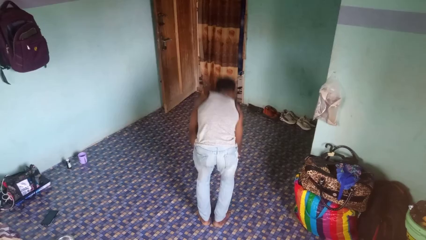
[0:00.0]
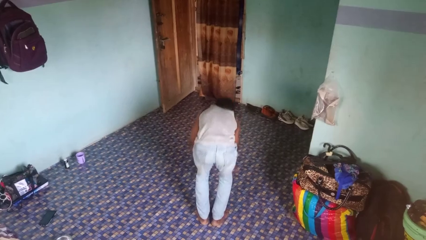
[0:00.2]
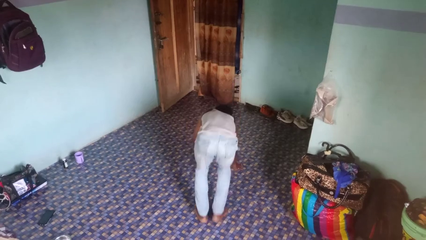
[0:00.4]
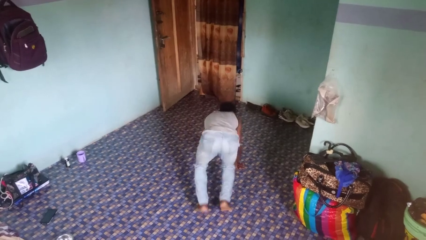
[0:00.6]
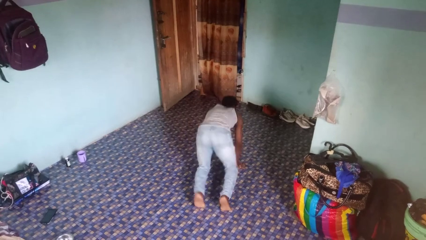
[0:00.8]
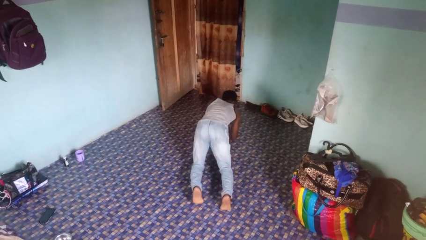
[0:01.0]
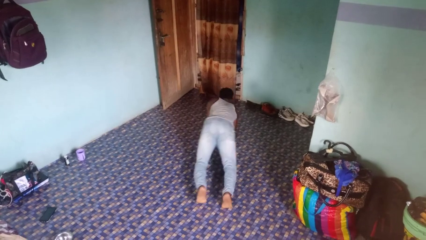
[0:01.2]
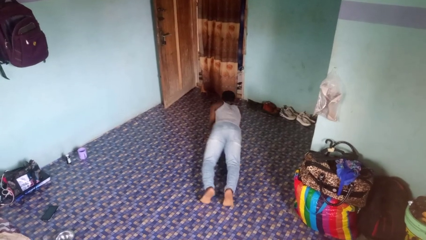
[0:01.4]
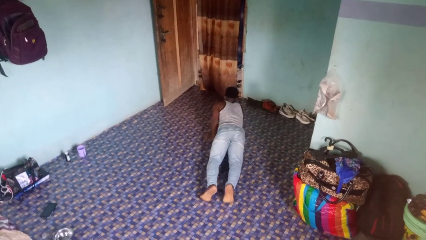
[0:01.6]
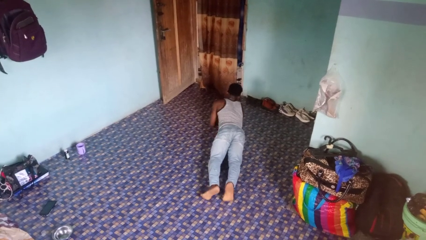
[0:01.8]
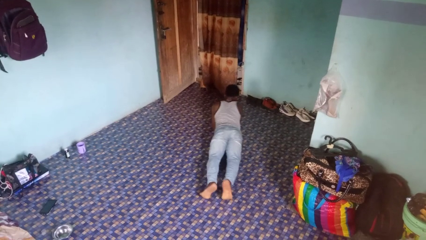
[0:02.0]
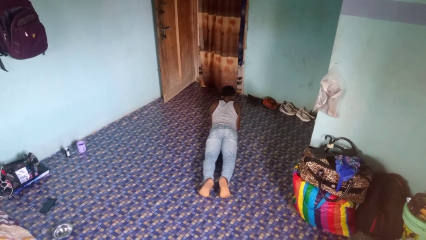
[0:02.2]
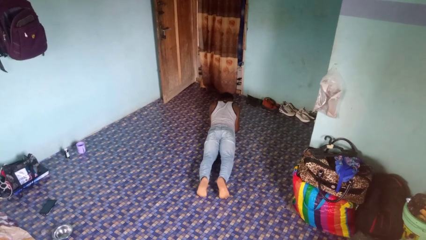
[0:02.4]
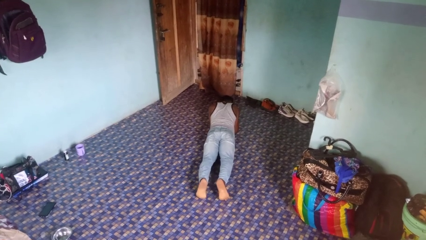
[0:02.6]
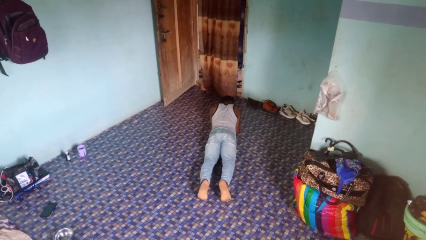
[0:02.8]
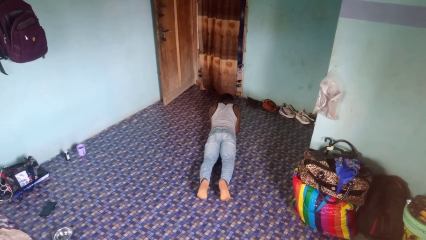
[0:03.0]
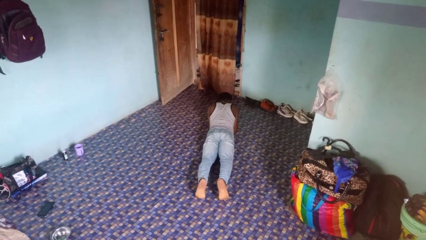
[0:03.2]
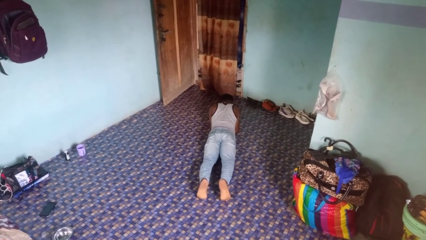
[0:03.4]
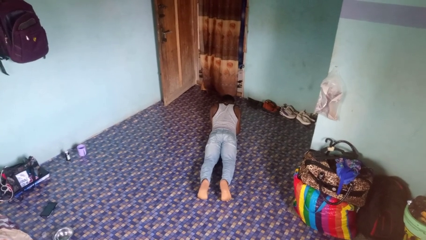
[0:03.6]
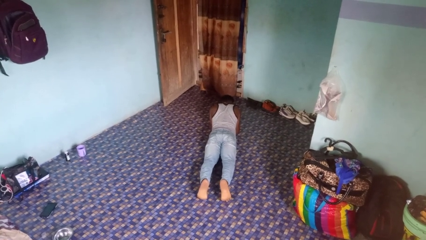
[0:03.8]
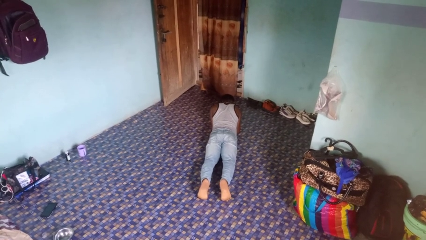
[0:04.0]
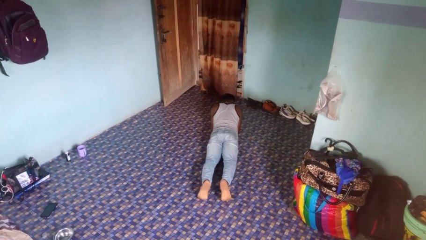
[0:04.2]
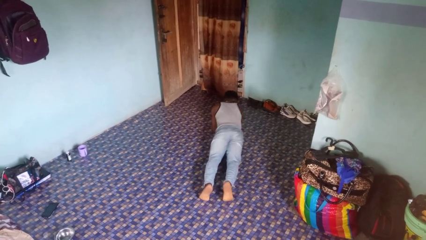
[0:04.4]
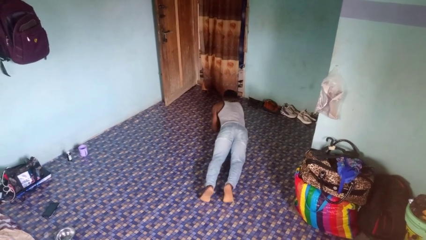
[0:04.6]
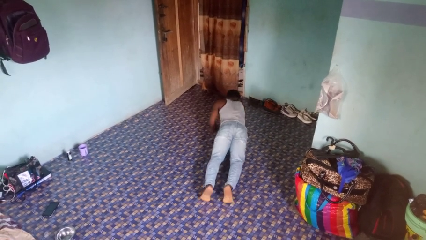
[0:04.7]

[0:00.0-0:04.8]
person exercises with plank

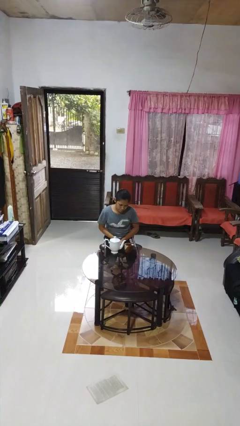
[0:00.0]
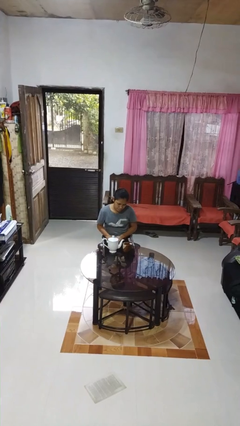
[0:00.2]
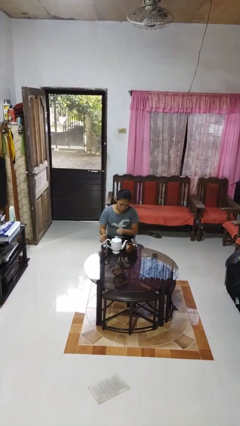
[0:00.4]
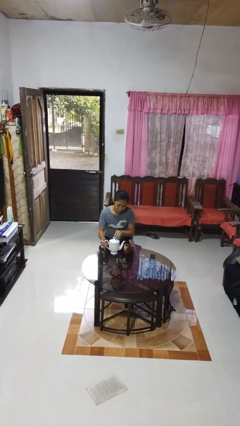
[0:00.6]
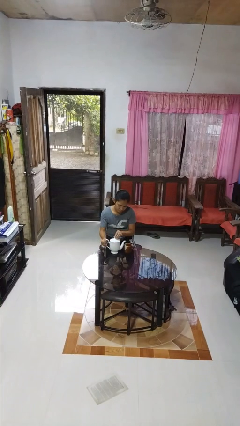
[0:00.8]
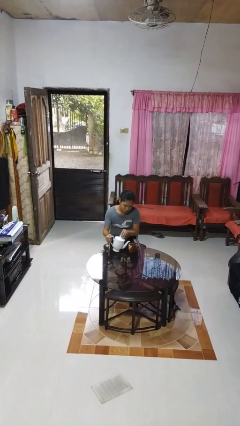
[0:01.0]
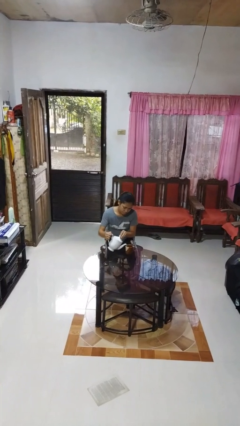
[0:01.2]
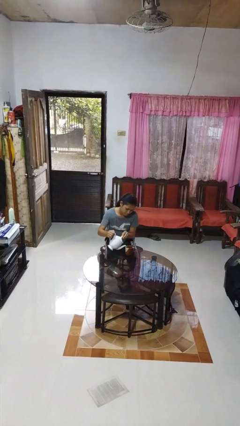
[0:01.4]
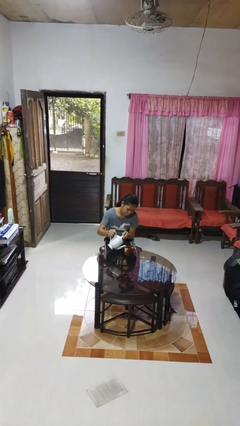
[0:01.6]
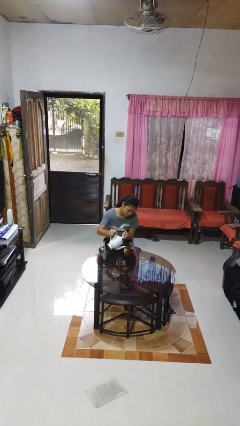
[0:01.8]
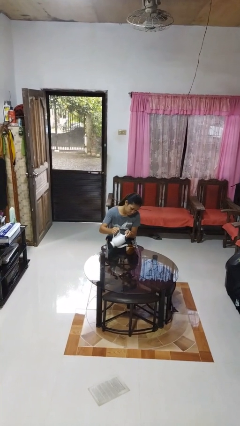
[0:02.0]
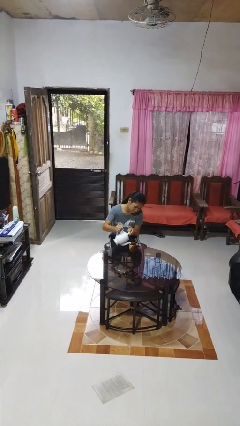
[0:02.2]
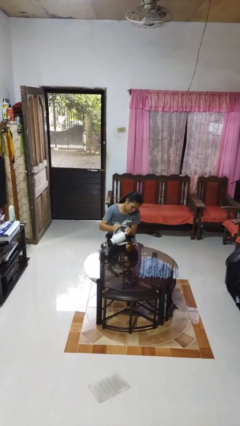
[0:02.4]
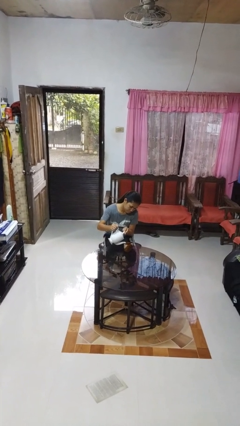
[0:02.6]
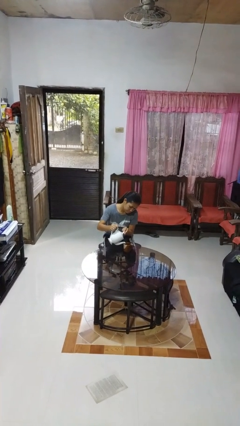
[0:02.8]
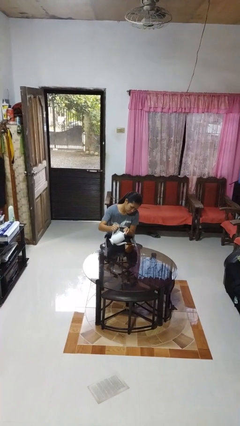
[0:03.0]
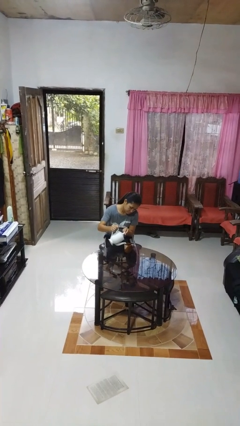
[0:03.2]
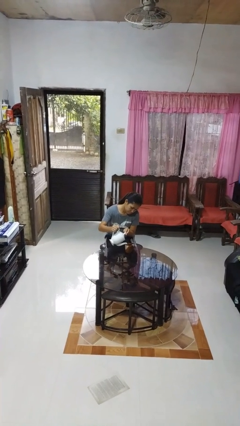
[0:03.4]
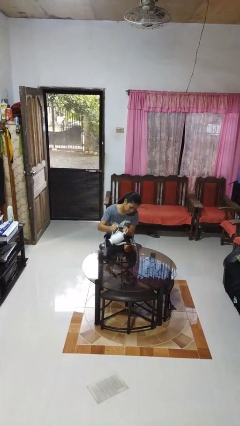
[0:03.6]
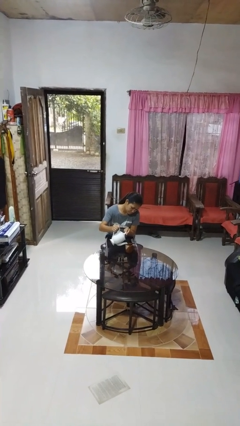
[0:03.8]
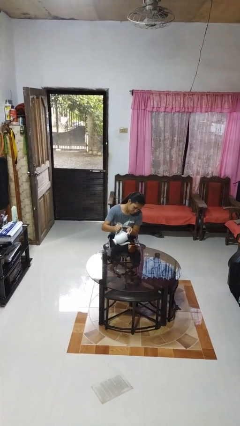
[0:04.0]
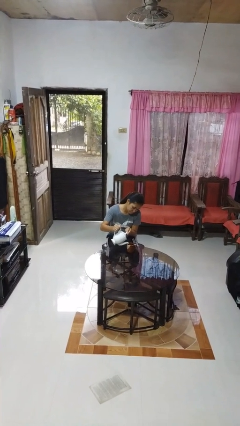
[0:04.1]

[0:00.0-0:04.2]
person pours coffee into mug

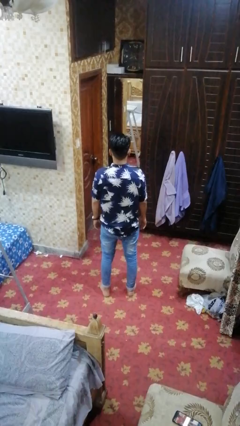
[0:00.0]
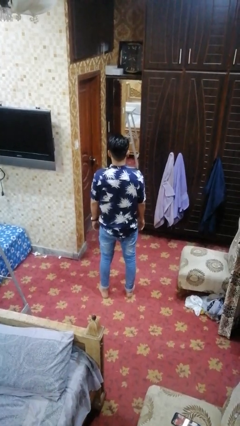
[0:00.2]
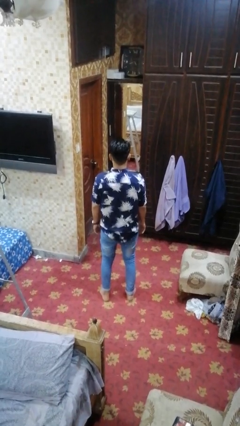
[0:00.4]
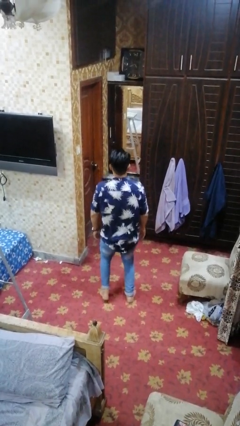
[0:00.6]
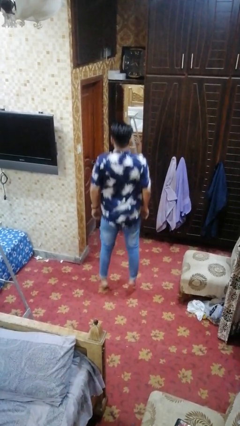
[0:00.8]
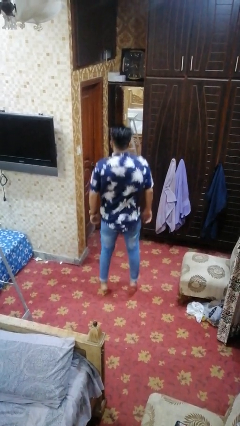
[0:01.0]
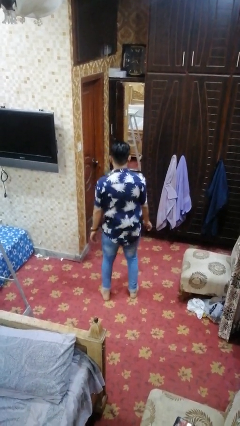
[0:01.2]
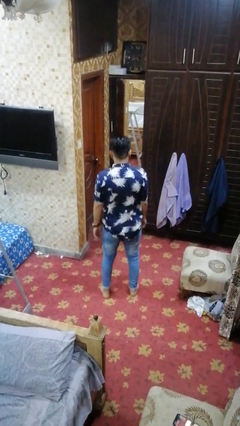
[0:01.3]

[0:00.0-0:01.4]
person jumps

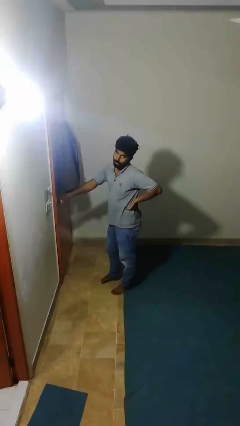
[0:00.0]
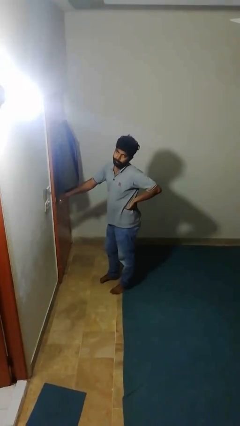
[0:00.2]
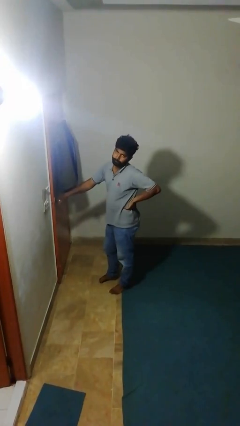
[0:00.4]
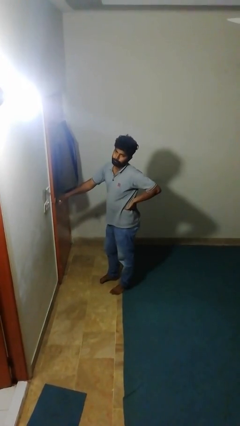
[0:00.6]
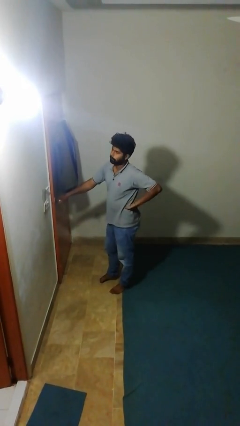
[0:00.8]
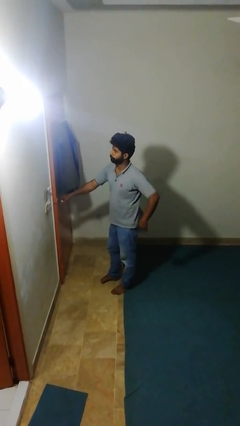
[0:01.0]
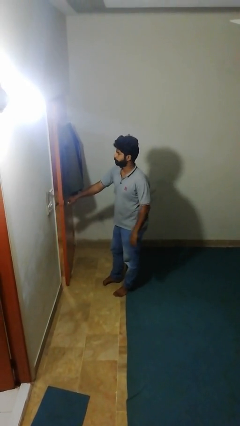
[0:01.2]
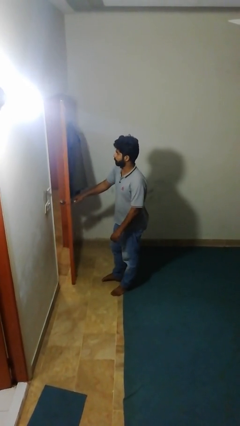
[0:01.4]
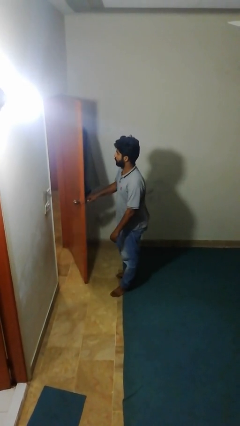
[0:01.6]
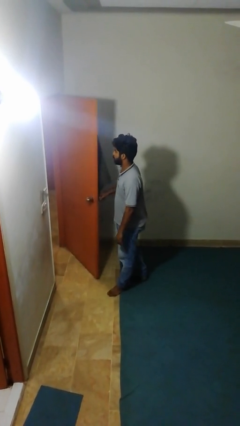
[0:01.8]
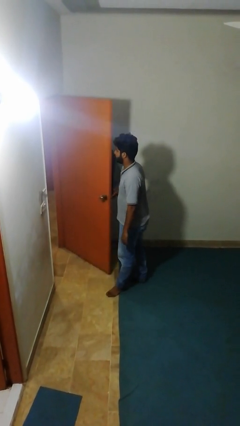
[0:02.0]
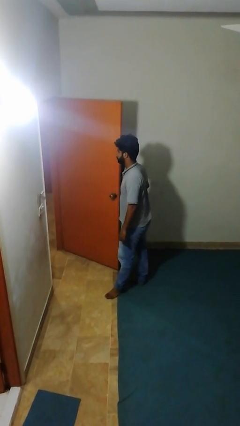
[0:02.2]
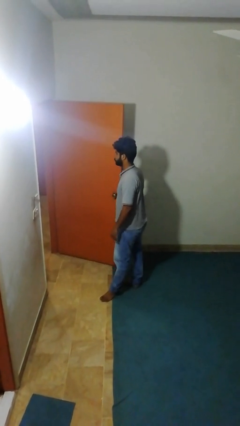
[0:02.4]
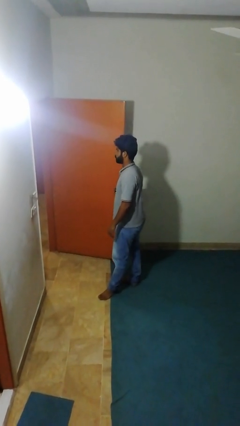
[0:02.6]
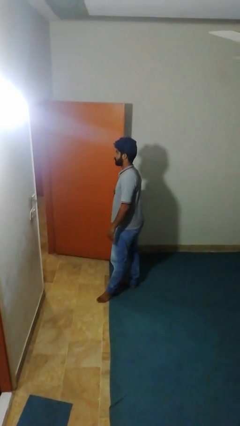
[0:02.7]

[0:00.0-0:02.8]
person opens facility door

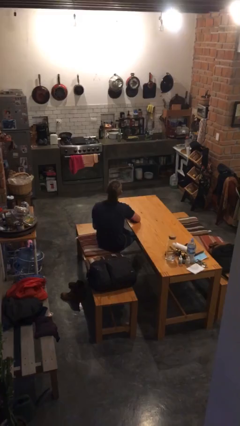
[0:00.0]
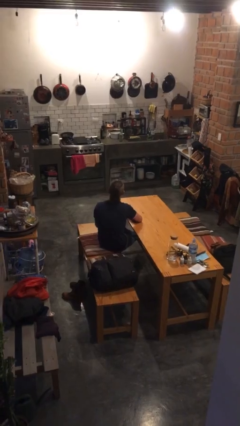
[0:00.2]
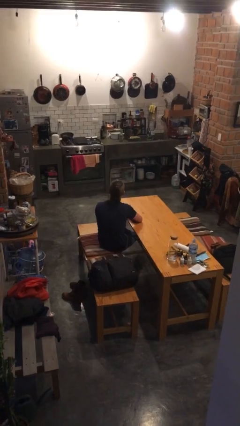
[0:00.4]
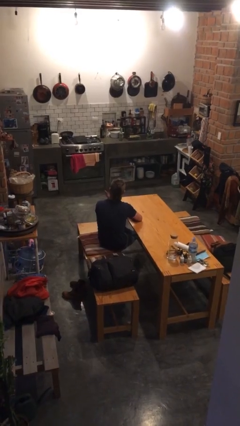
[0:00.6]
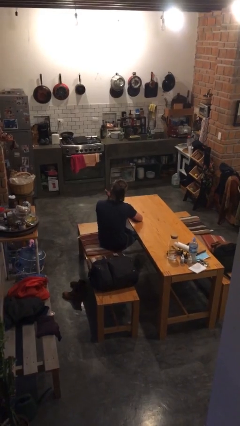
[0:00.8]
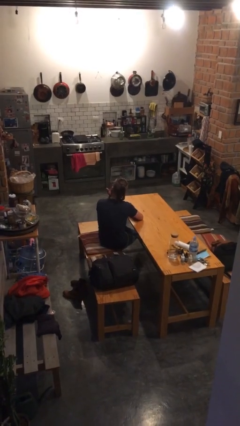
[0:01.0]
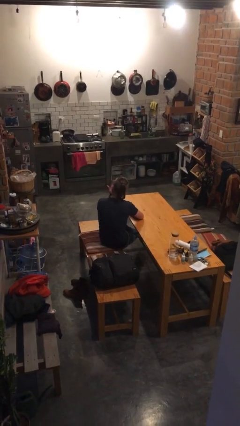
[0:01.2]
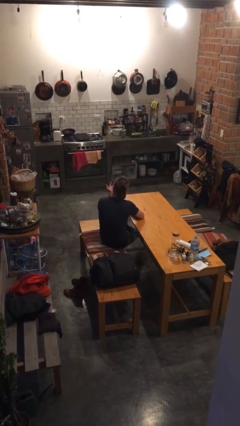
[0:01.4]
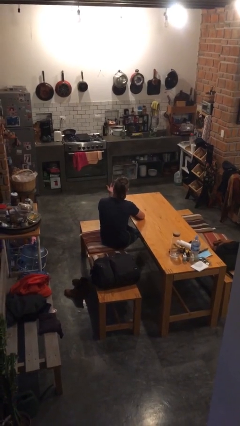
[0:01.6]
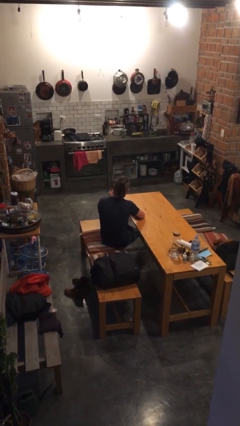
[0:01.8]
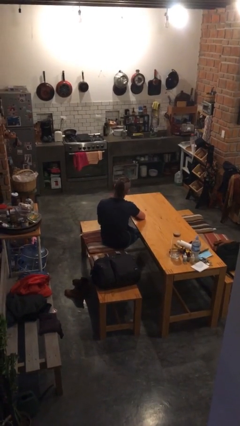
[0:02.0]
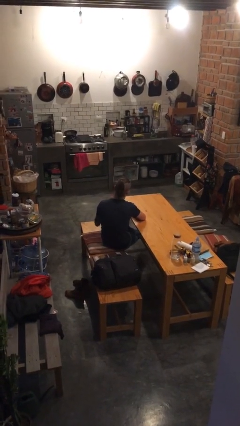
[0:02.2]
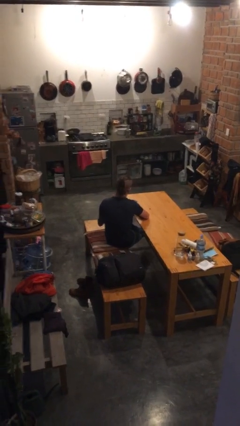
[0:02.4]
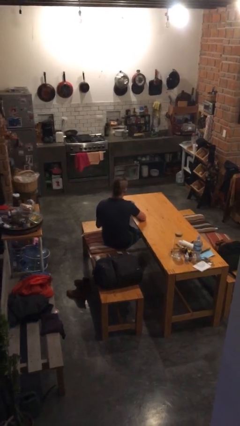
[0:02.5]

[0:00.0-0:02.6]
person licks fingers

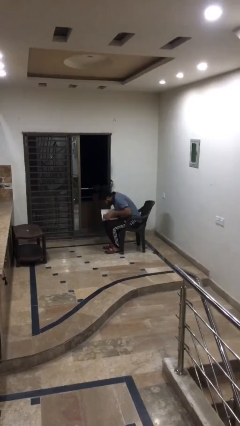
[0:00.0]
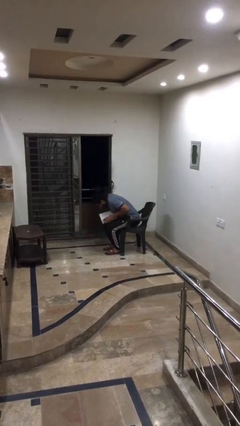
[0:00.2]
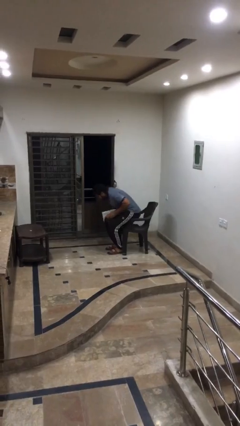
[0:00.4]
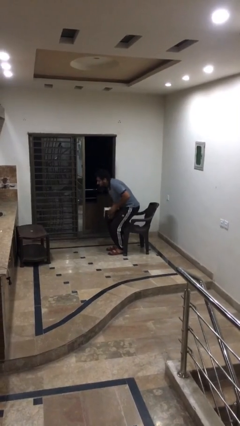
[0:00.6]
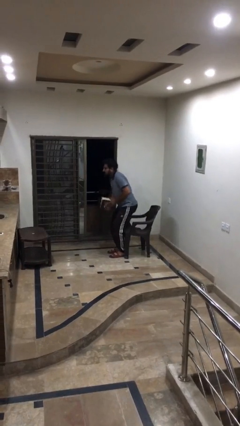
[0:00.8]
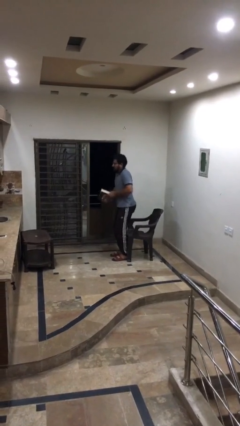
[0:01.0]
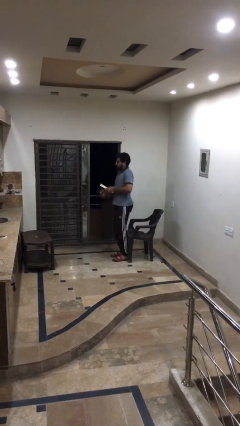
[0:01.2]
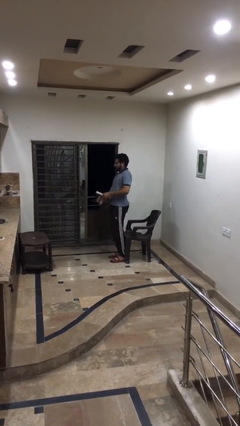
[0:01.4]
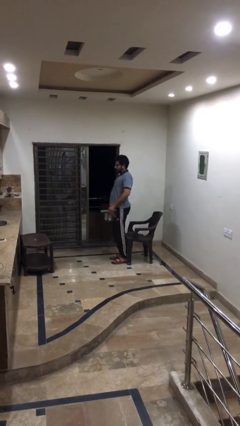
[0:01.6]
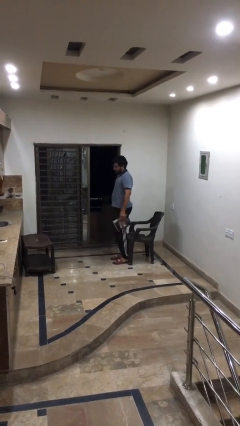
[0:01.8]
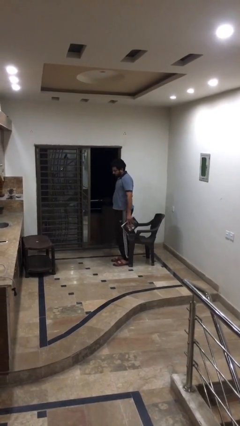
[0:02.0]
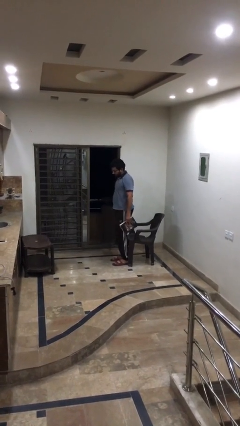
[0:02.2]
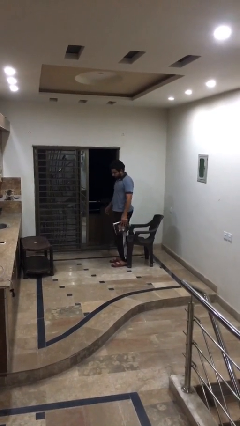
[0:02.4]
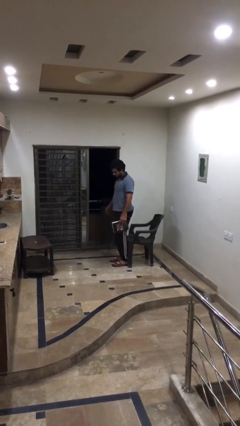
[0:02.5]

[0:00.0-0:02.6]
person stands up
